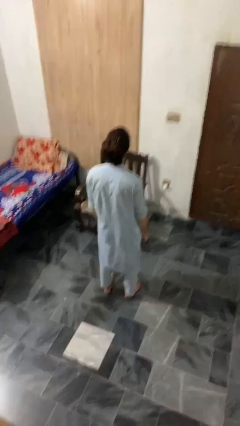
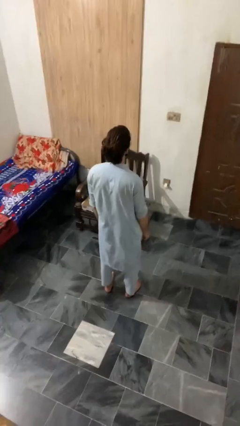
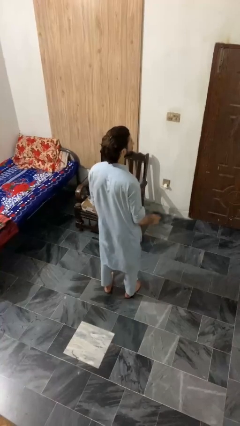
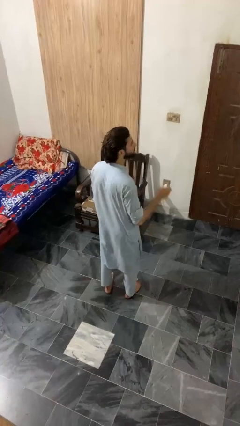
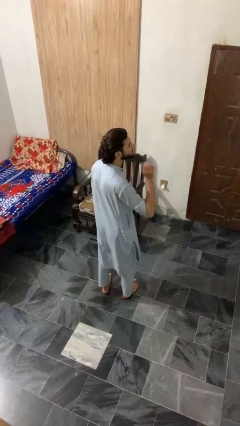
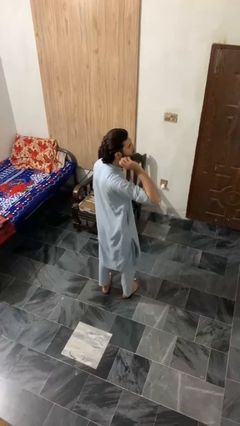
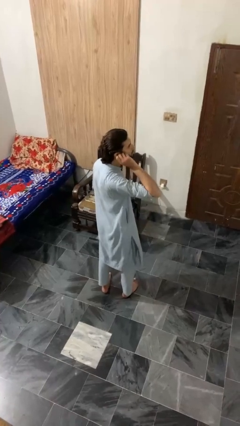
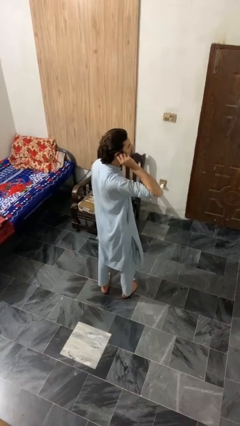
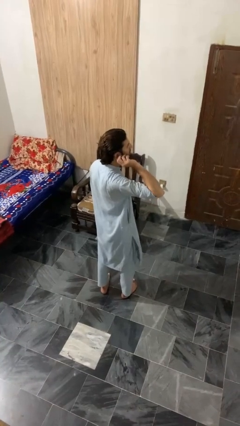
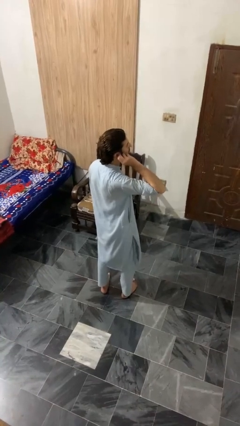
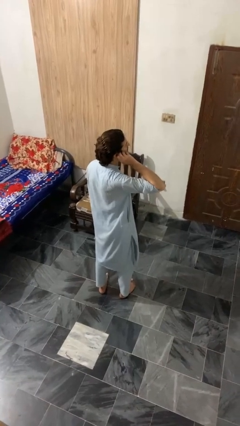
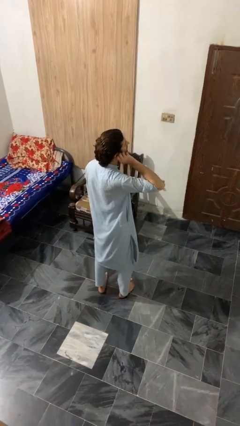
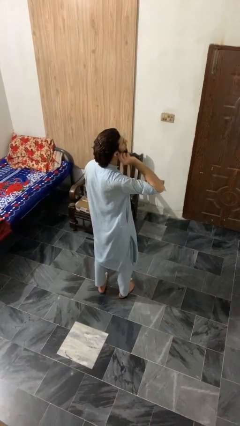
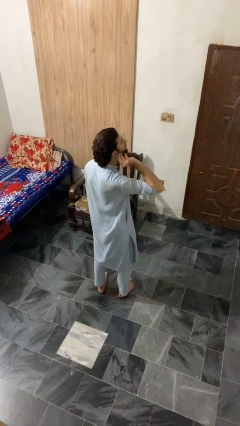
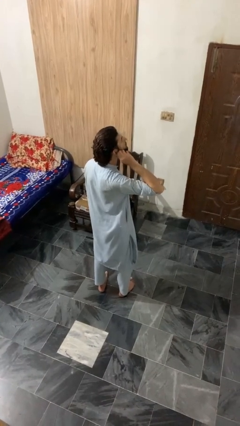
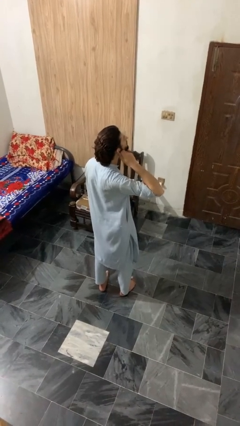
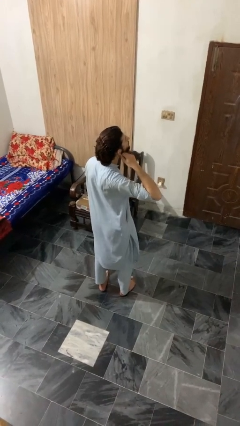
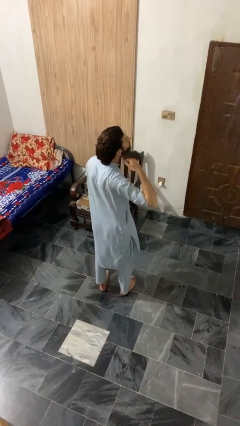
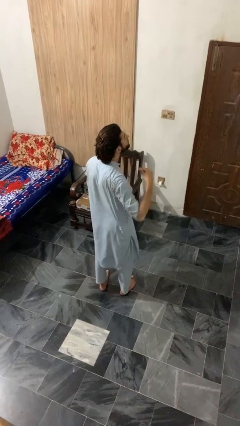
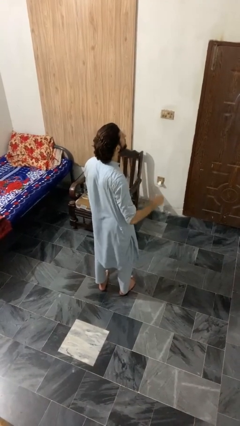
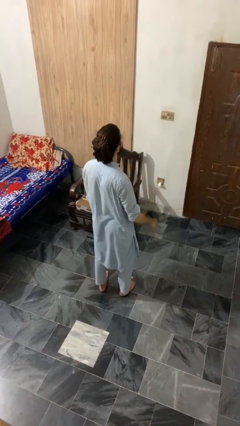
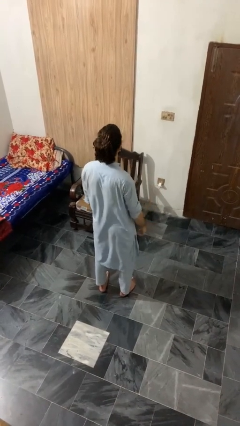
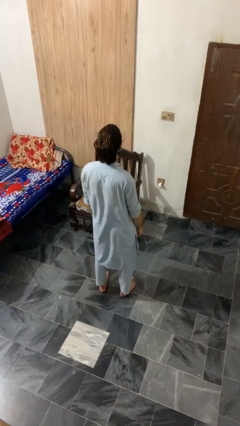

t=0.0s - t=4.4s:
person touches earlobe

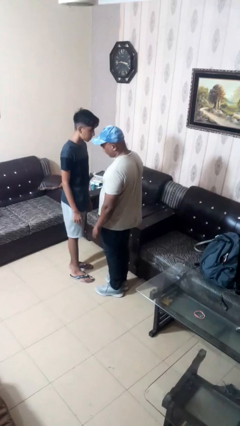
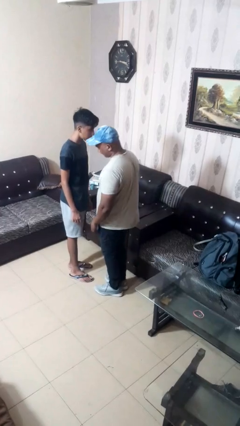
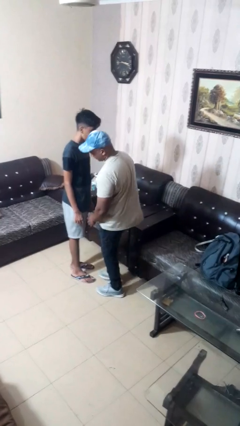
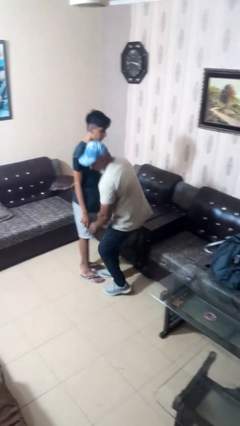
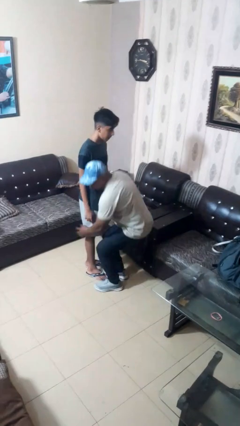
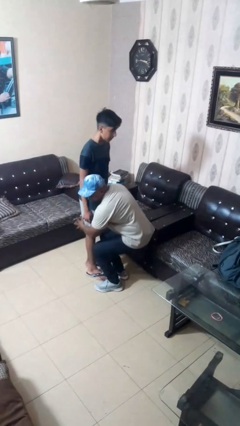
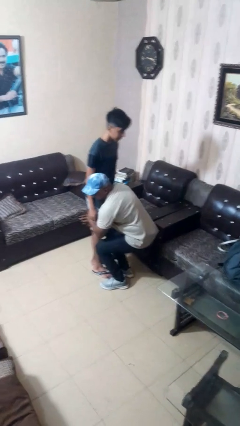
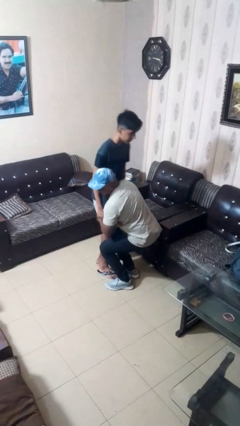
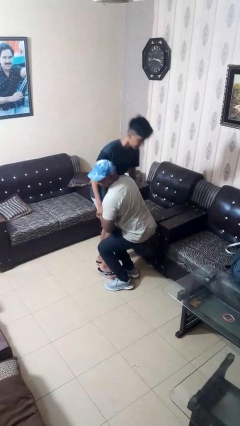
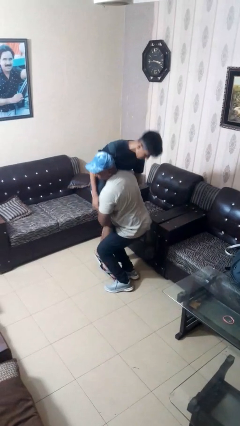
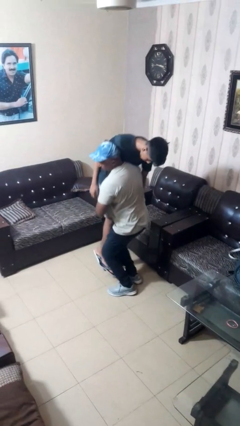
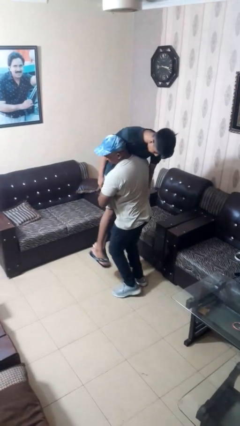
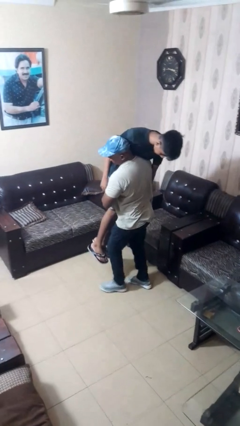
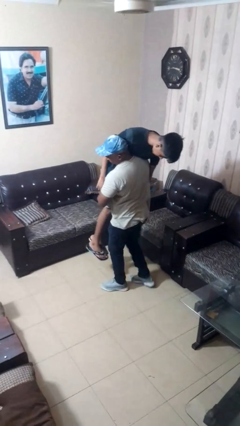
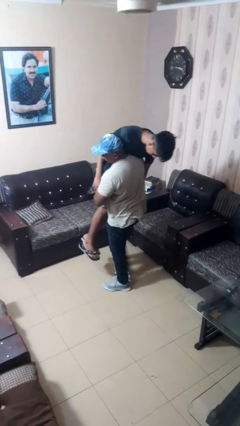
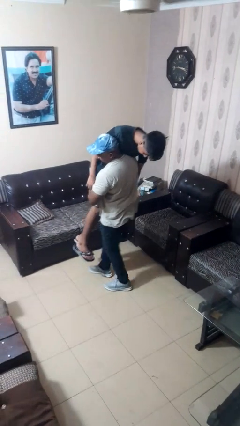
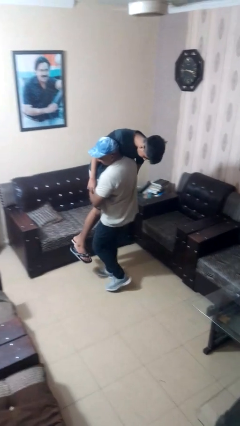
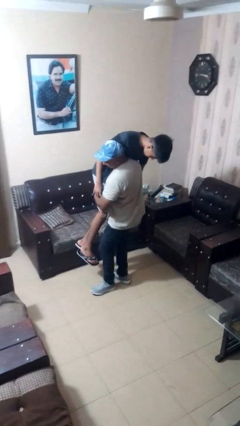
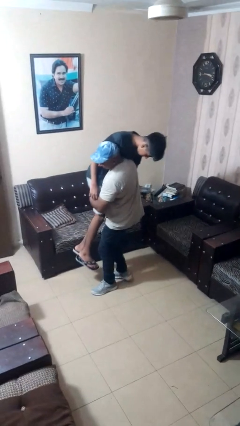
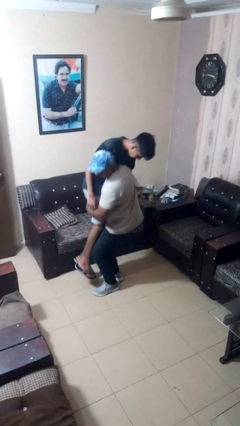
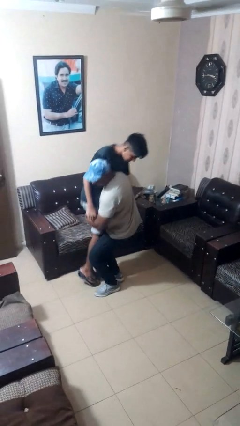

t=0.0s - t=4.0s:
person carries person over shoulder

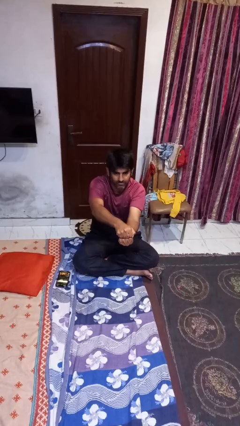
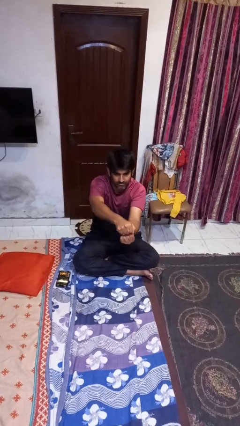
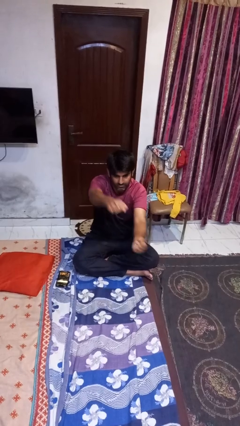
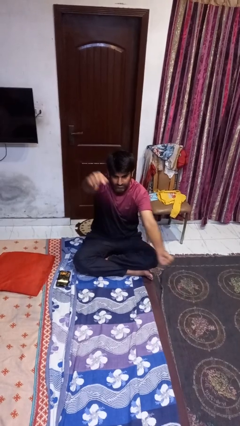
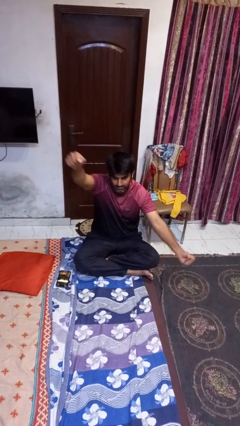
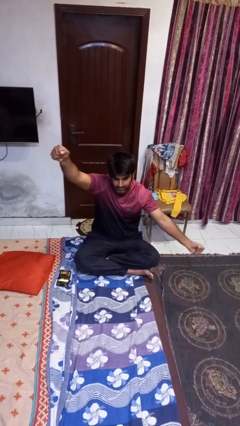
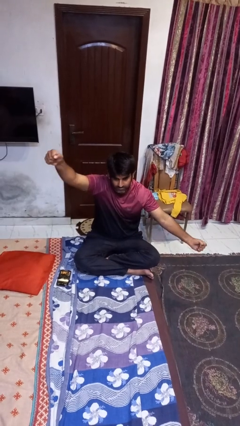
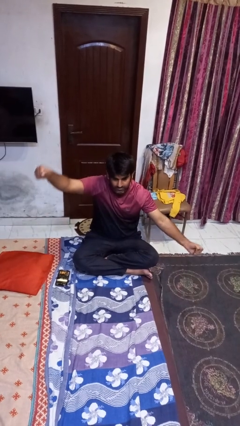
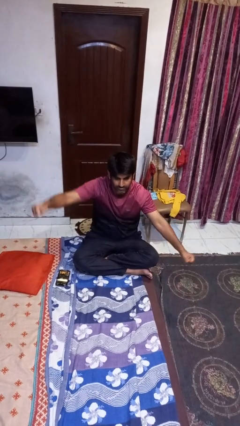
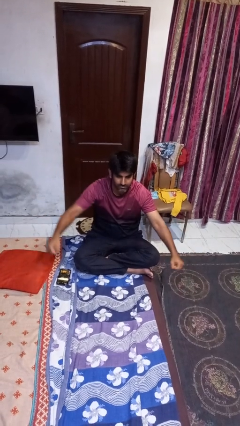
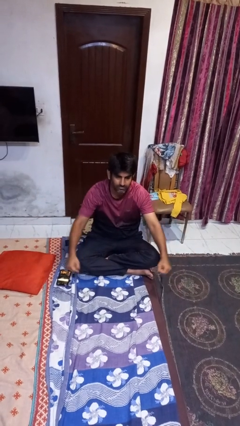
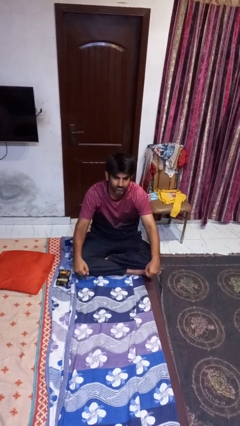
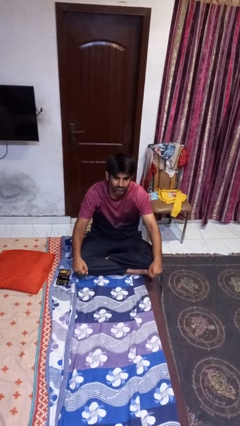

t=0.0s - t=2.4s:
person gestures zoom out

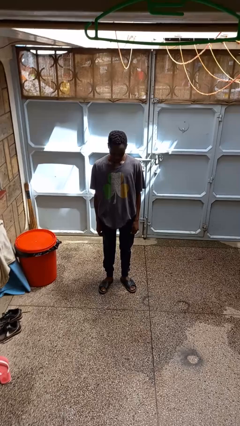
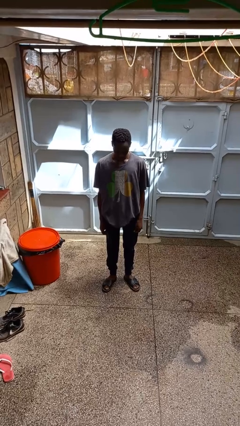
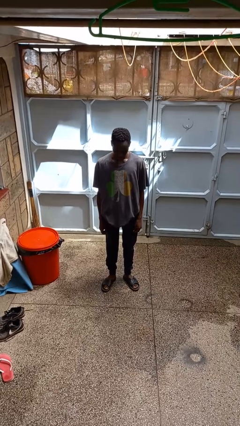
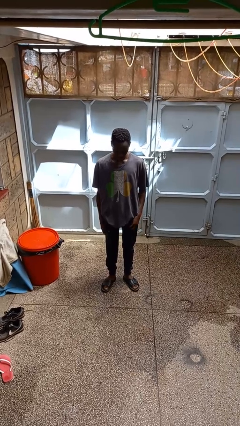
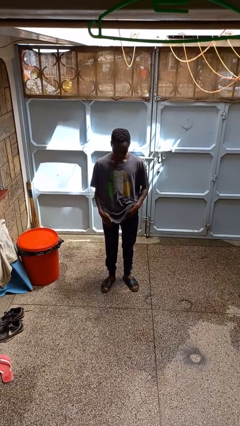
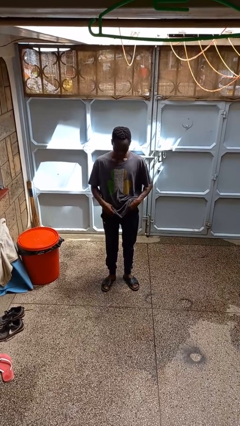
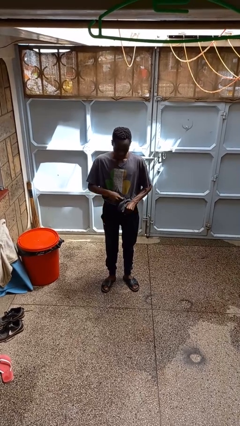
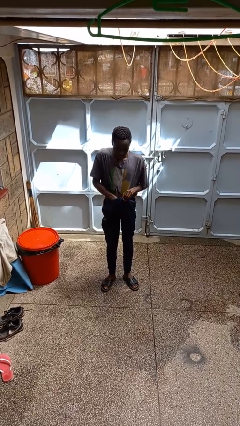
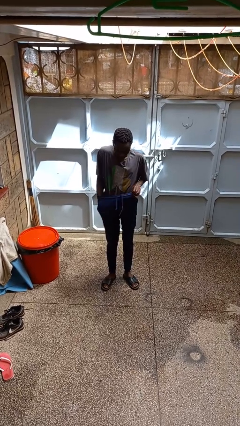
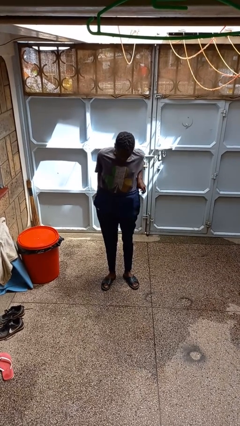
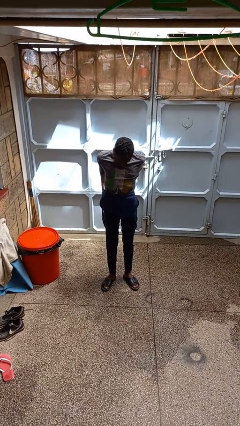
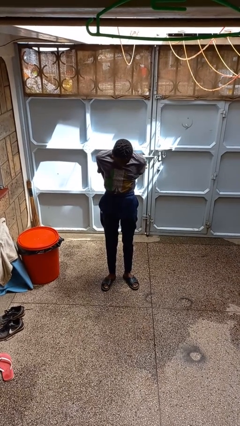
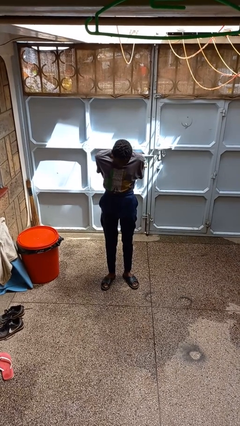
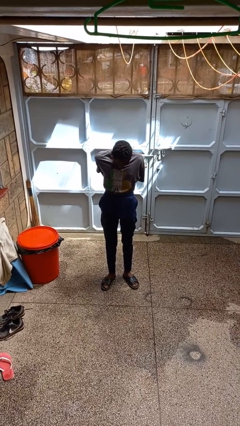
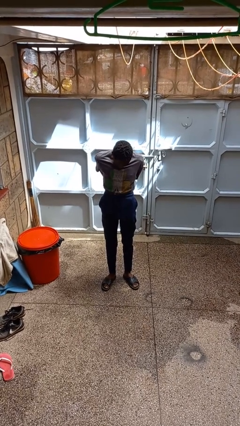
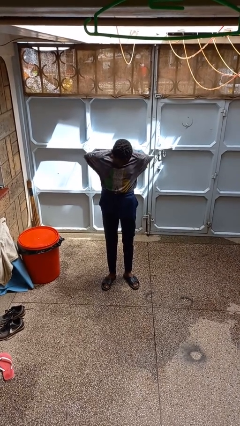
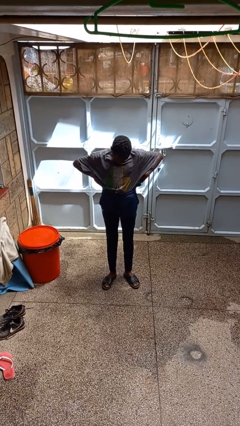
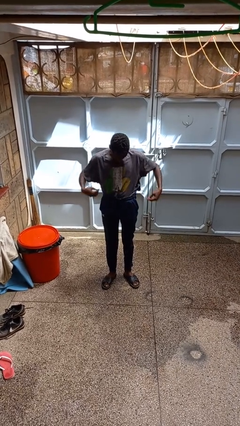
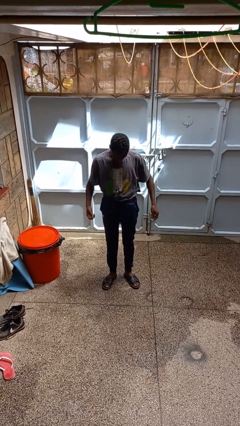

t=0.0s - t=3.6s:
person tucks in shirt

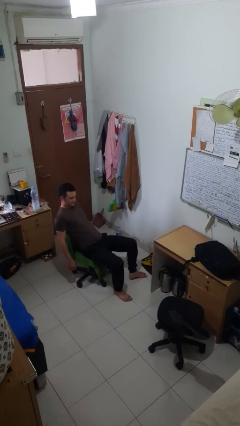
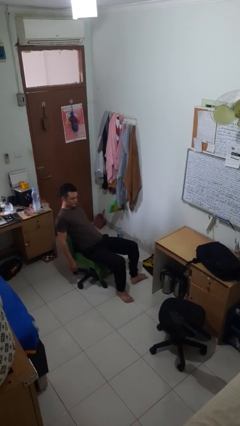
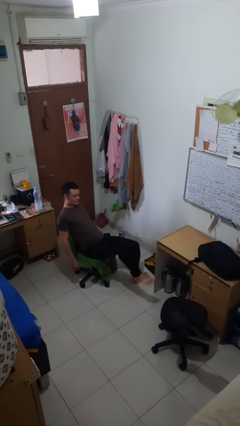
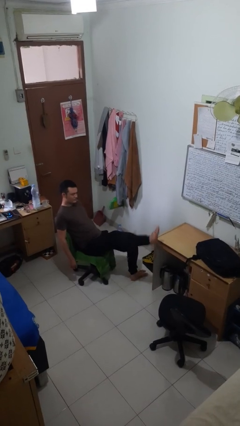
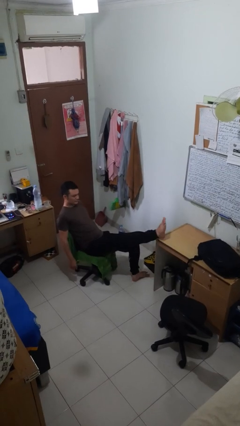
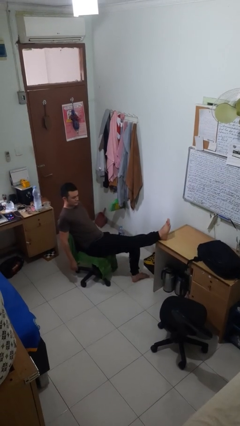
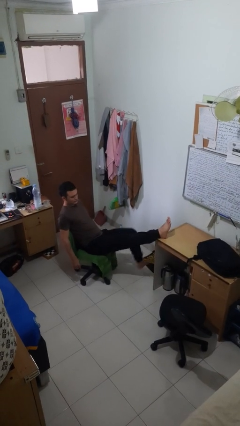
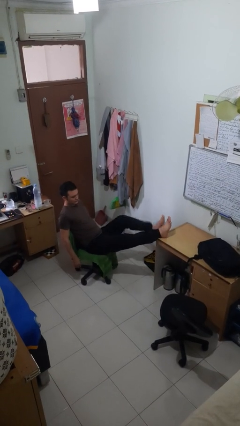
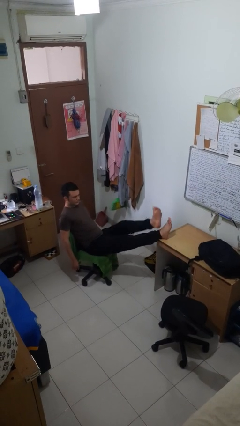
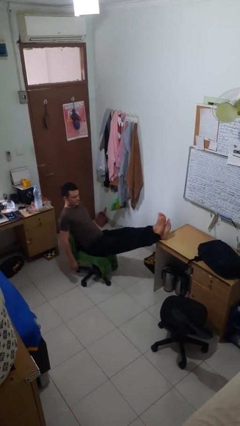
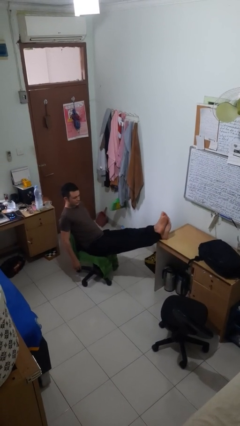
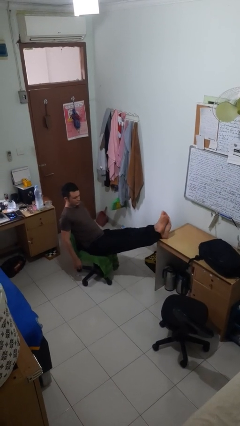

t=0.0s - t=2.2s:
person puts feet up

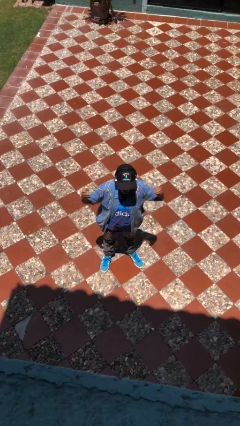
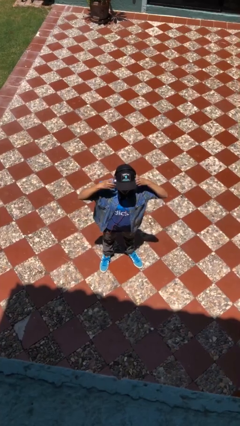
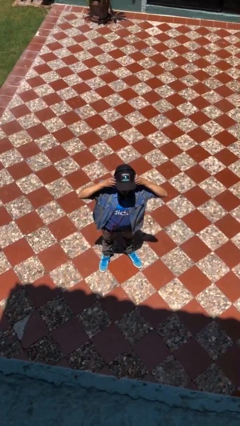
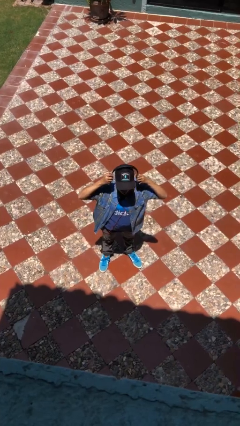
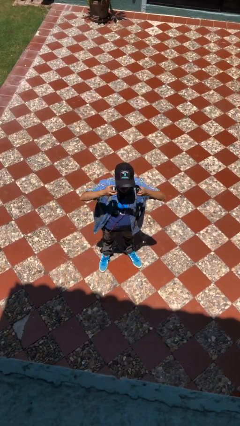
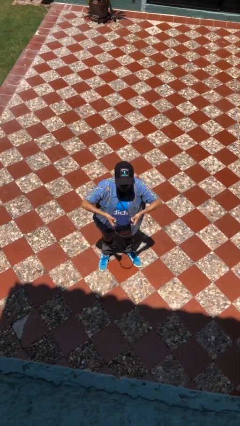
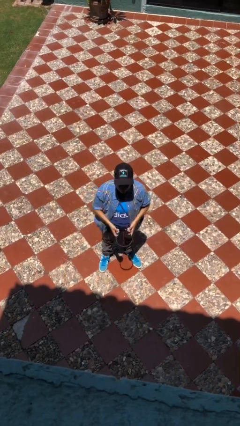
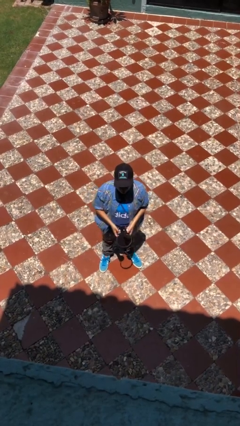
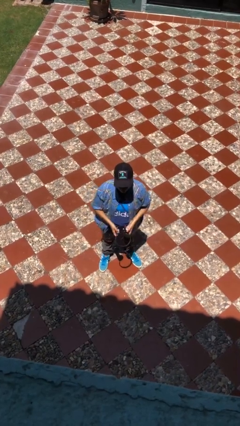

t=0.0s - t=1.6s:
person takes off headphones
